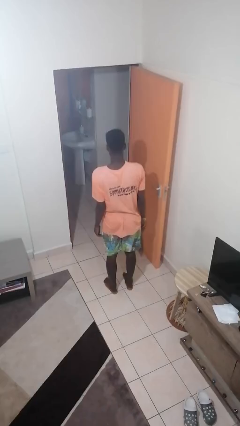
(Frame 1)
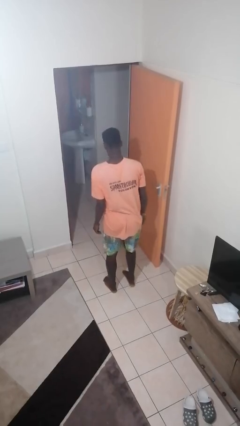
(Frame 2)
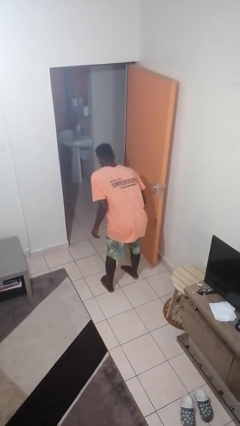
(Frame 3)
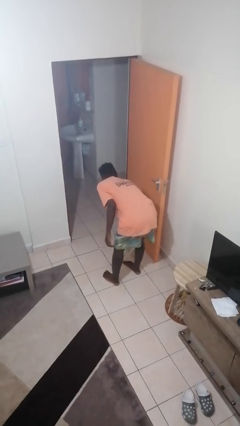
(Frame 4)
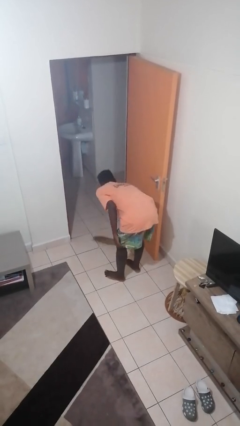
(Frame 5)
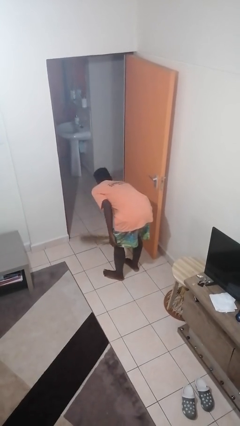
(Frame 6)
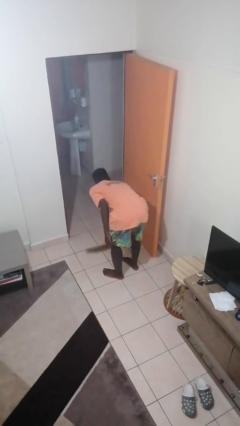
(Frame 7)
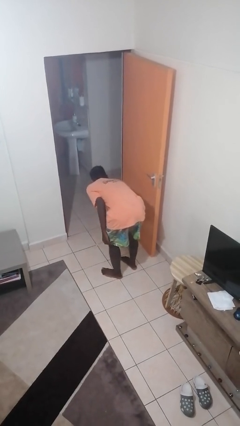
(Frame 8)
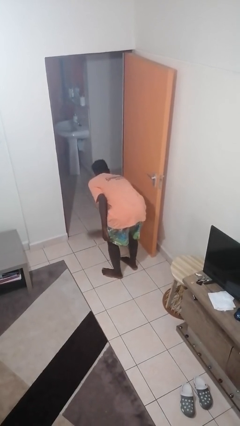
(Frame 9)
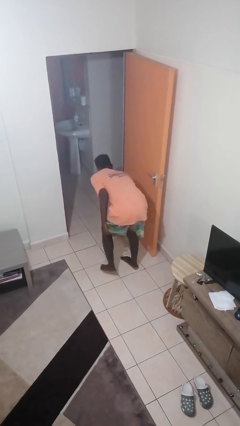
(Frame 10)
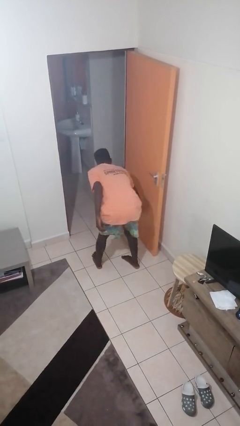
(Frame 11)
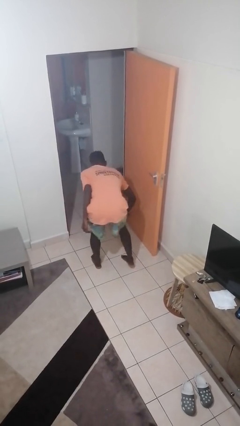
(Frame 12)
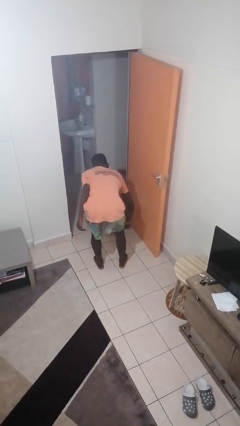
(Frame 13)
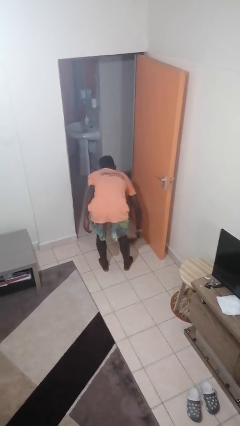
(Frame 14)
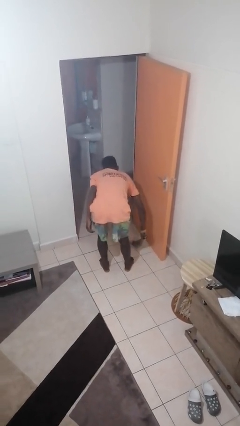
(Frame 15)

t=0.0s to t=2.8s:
person sweeps floor

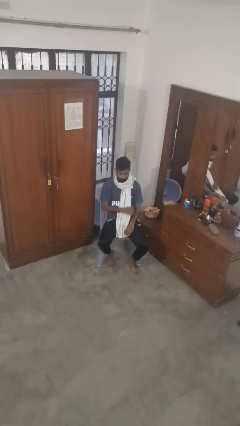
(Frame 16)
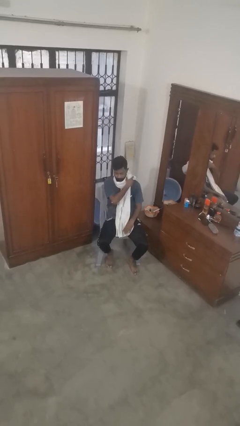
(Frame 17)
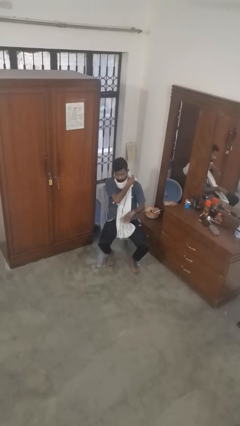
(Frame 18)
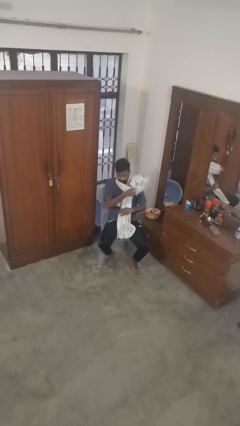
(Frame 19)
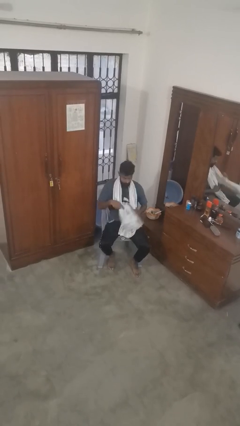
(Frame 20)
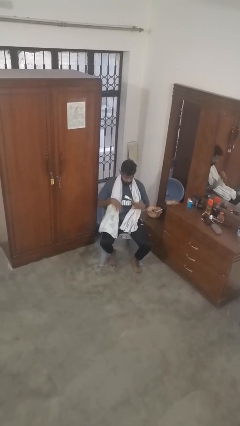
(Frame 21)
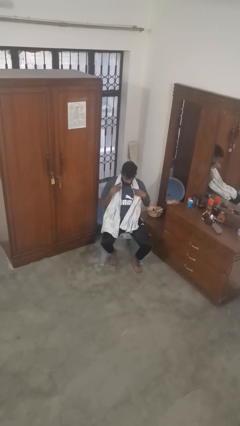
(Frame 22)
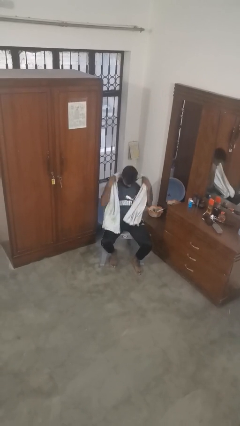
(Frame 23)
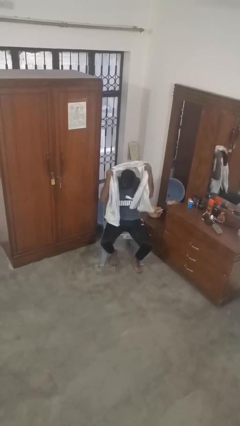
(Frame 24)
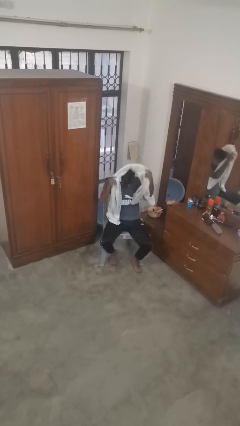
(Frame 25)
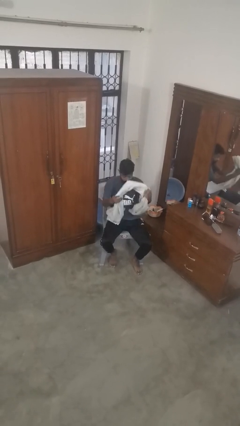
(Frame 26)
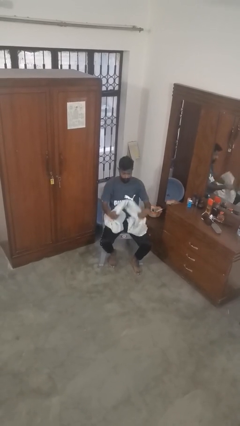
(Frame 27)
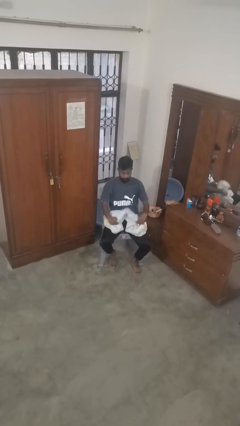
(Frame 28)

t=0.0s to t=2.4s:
person takes off scarf

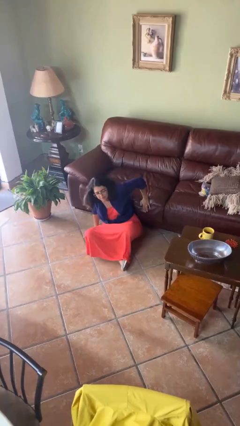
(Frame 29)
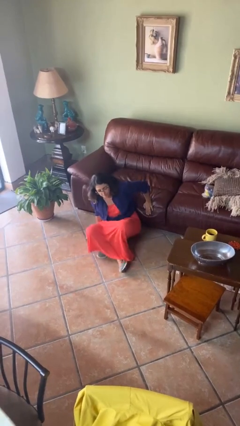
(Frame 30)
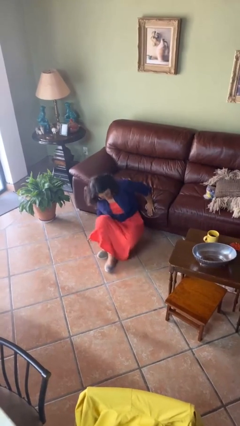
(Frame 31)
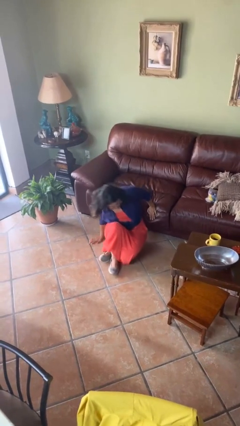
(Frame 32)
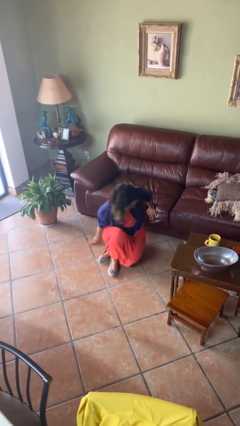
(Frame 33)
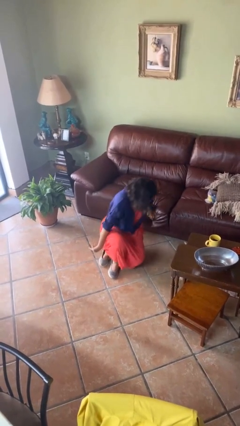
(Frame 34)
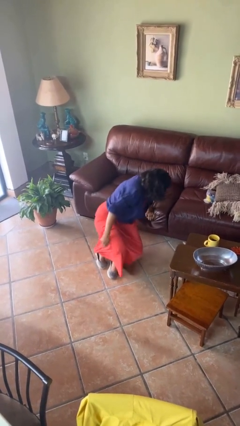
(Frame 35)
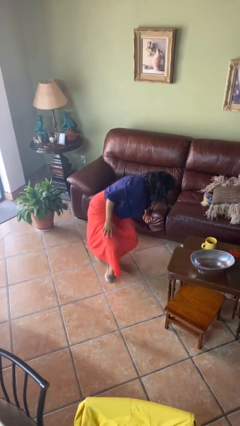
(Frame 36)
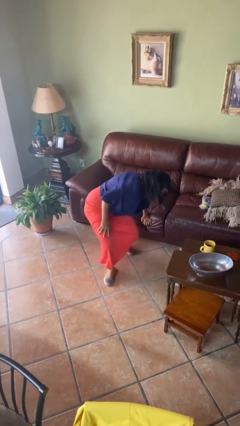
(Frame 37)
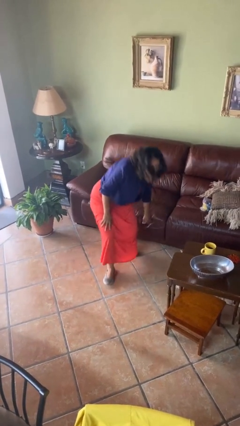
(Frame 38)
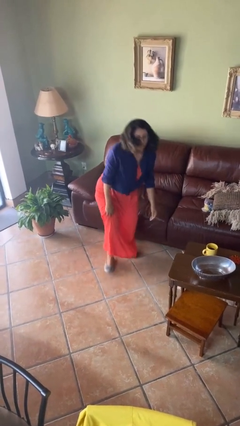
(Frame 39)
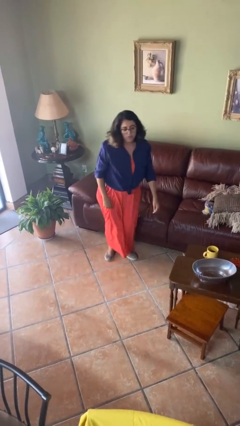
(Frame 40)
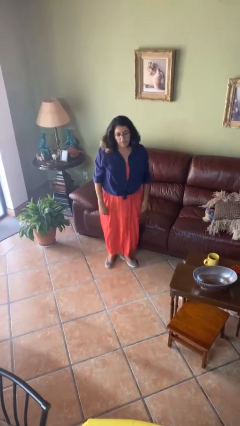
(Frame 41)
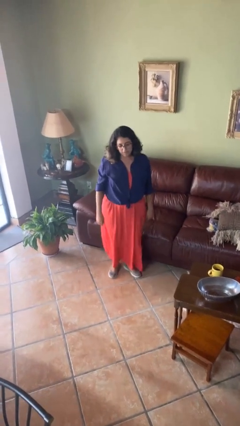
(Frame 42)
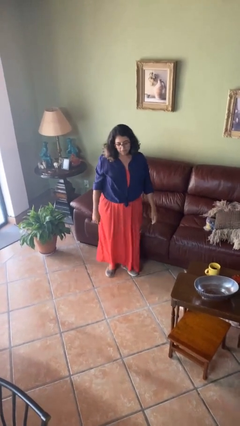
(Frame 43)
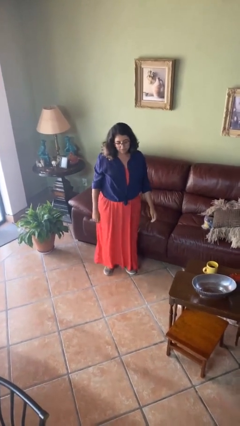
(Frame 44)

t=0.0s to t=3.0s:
person stands up from floor

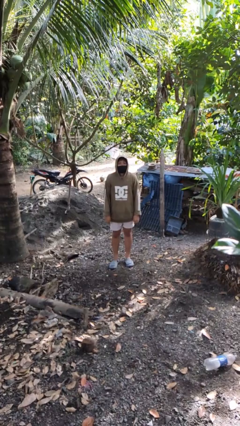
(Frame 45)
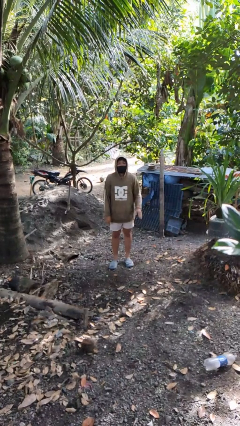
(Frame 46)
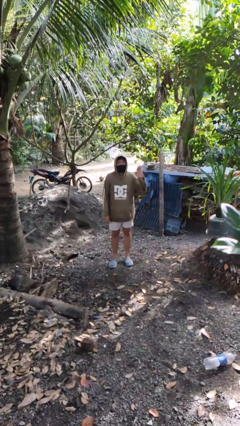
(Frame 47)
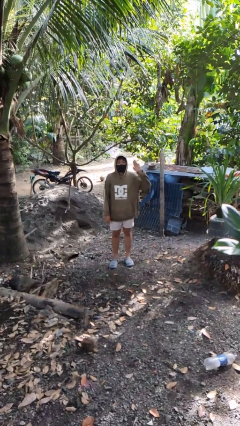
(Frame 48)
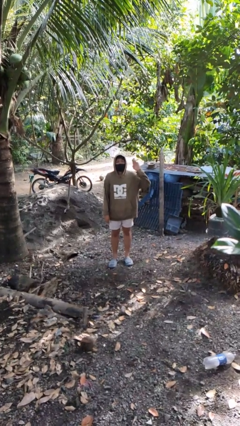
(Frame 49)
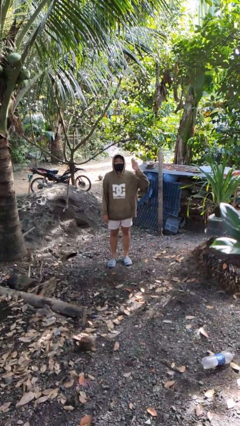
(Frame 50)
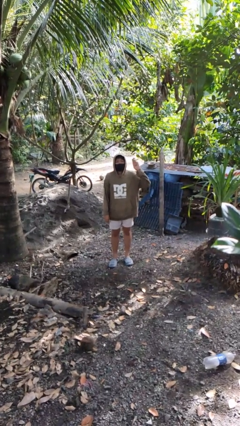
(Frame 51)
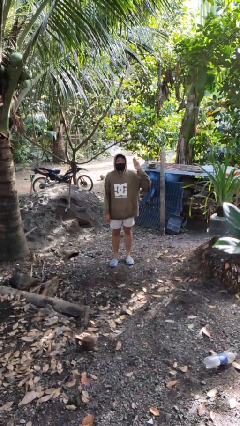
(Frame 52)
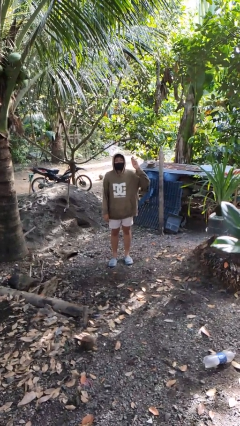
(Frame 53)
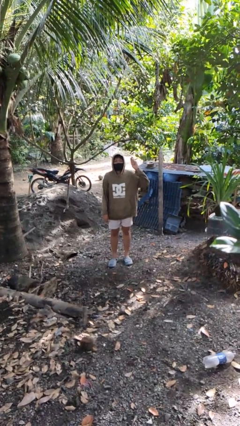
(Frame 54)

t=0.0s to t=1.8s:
person gestures number three

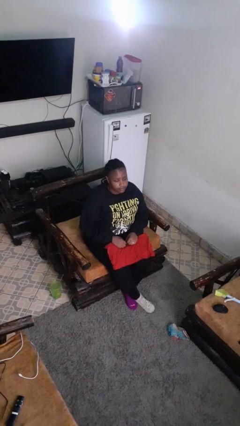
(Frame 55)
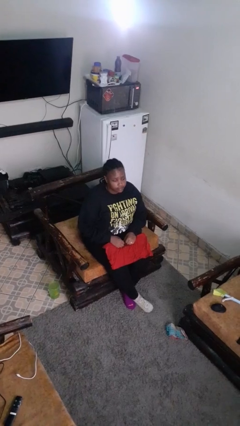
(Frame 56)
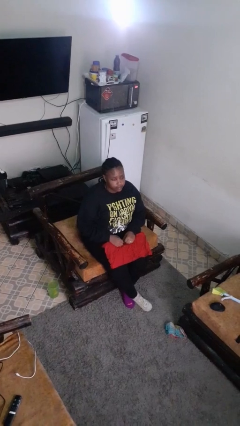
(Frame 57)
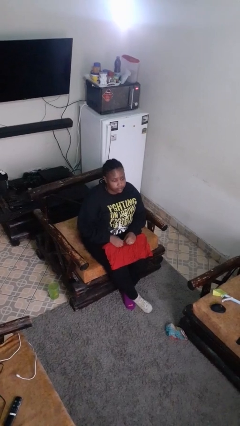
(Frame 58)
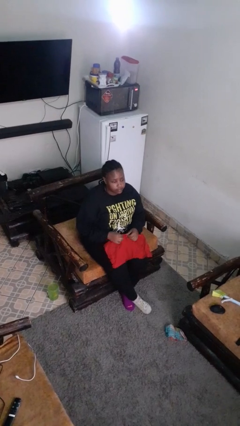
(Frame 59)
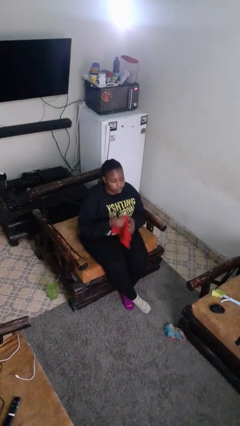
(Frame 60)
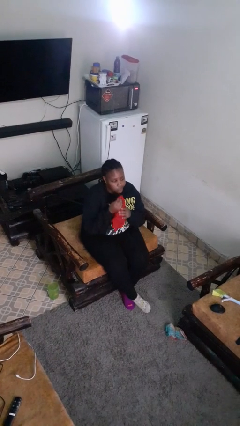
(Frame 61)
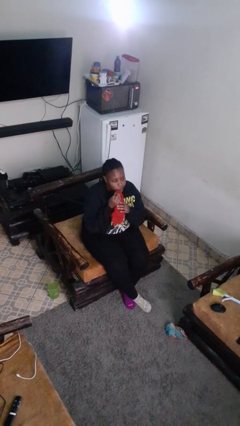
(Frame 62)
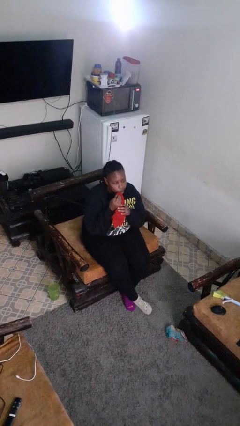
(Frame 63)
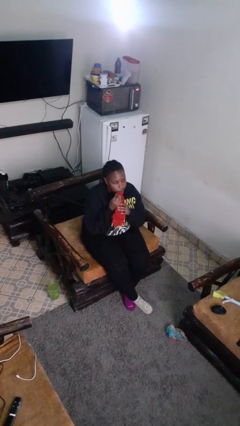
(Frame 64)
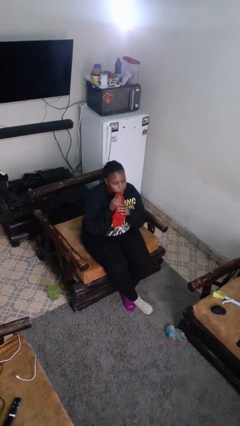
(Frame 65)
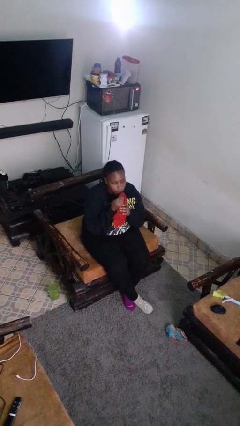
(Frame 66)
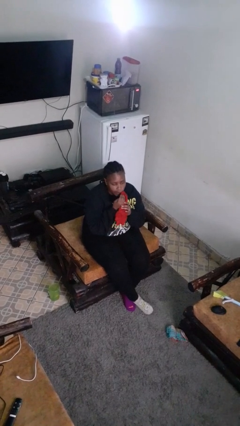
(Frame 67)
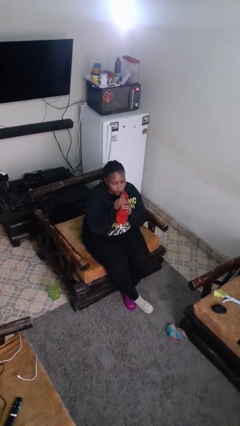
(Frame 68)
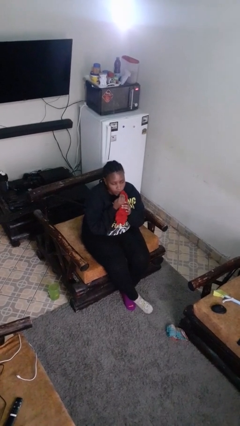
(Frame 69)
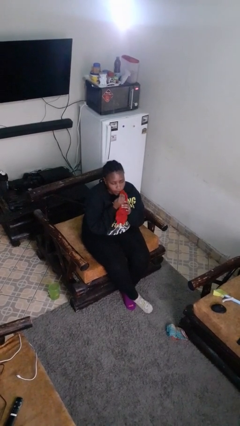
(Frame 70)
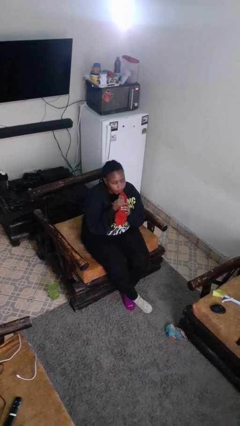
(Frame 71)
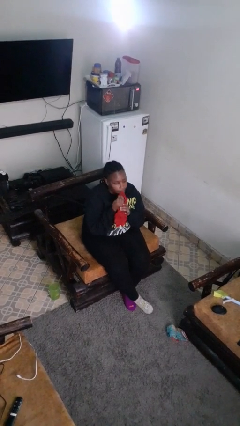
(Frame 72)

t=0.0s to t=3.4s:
person wipes mouth with napkin

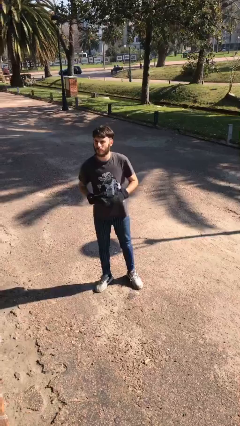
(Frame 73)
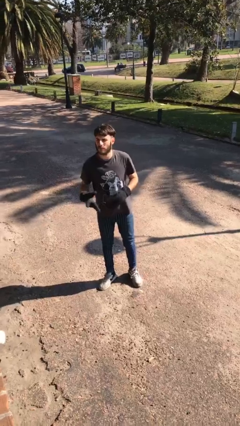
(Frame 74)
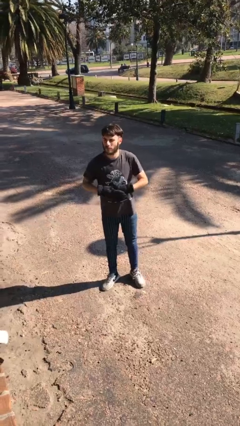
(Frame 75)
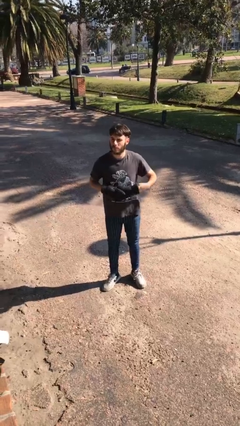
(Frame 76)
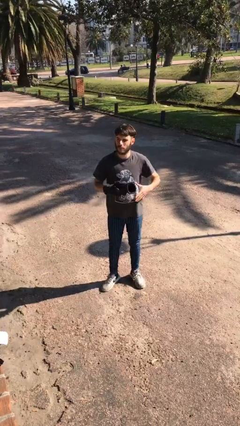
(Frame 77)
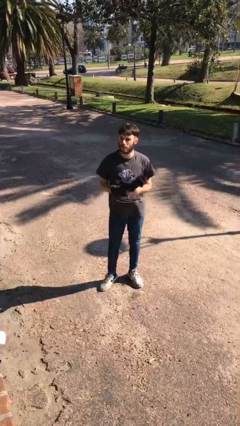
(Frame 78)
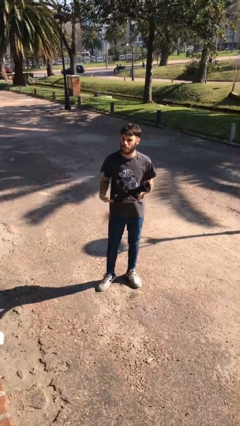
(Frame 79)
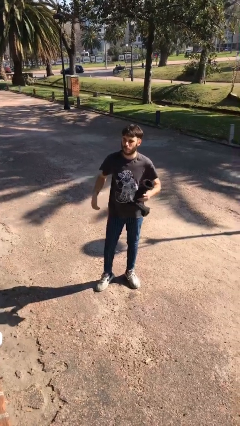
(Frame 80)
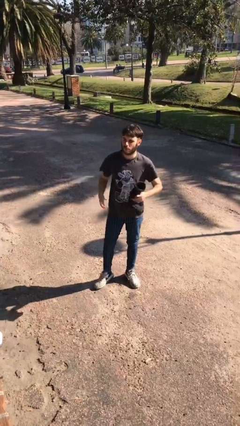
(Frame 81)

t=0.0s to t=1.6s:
person takes off gloves

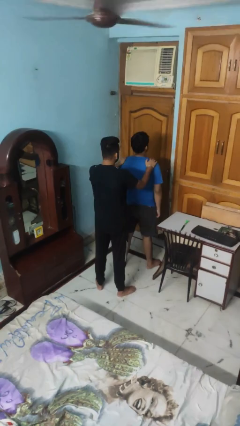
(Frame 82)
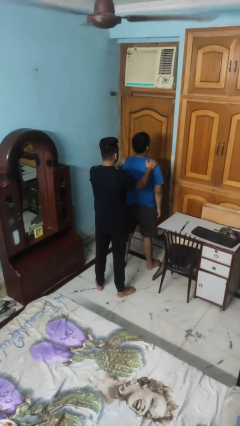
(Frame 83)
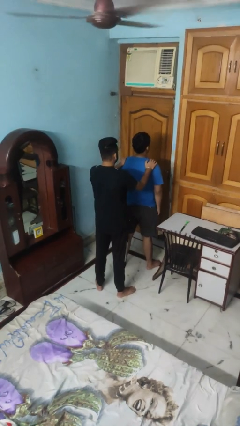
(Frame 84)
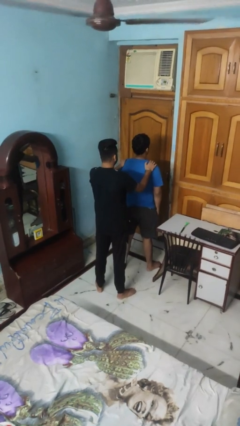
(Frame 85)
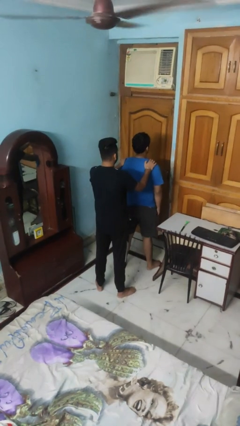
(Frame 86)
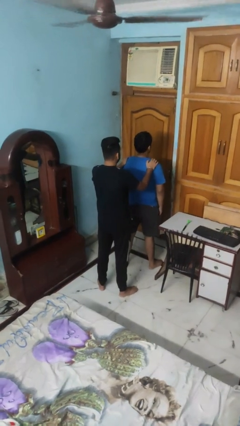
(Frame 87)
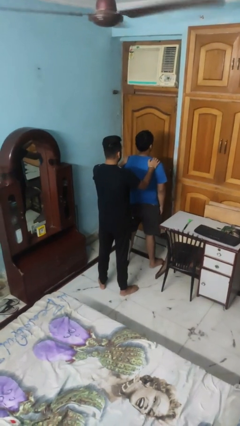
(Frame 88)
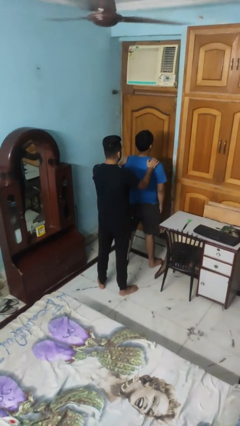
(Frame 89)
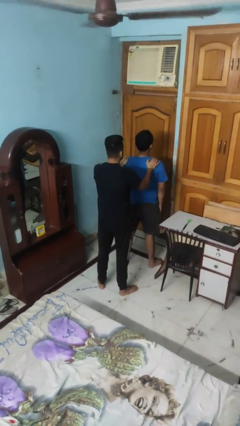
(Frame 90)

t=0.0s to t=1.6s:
person grabs person by shoulder

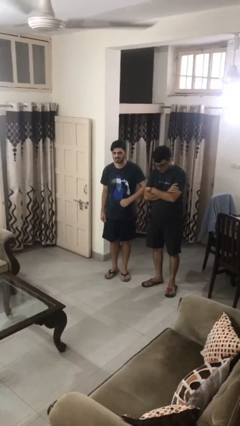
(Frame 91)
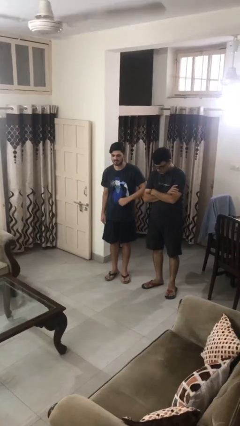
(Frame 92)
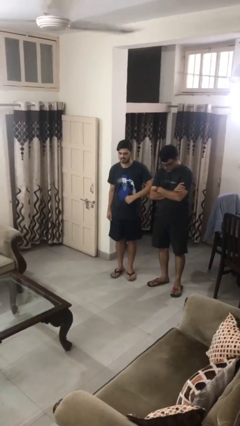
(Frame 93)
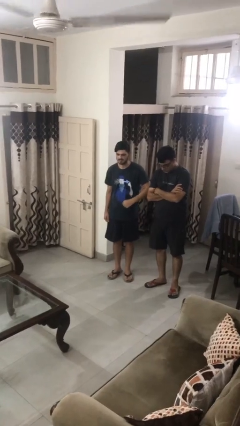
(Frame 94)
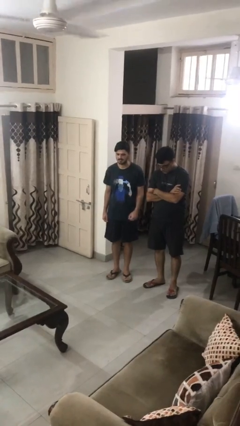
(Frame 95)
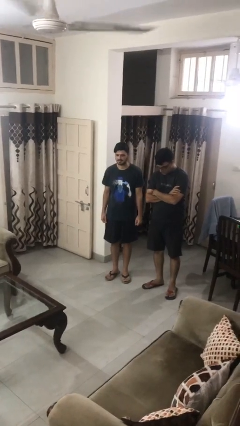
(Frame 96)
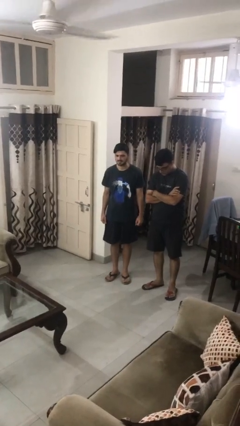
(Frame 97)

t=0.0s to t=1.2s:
person nudges person with elbow
